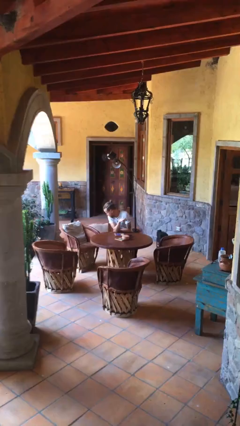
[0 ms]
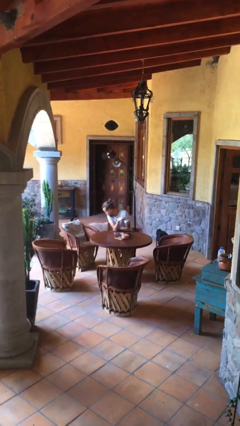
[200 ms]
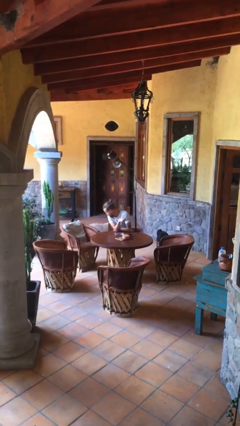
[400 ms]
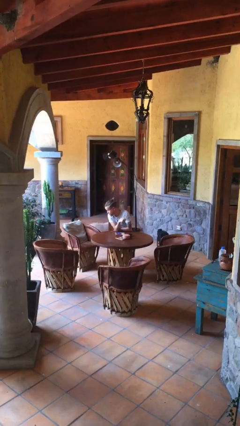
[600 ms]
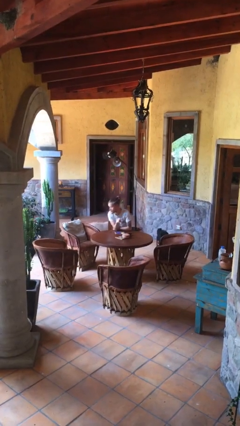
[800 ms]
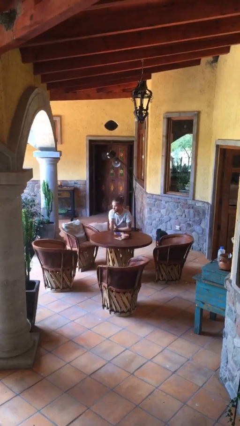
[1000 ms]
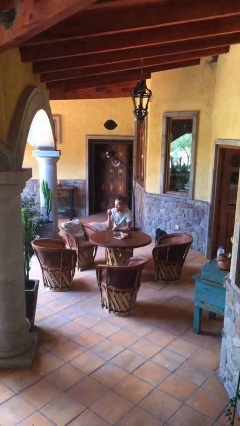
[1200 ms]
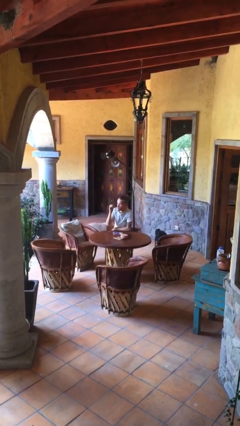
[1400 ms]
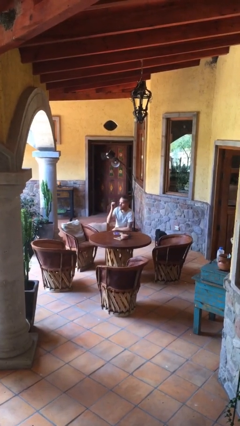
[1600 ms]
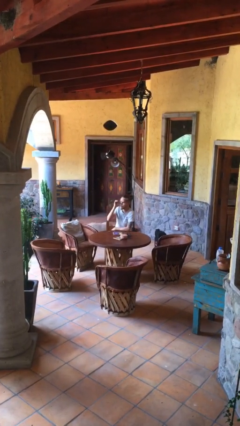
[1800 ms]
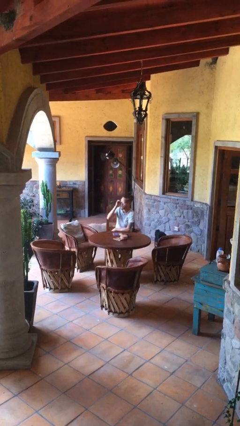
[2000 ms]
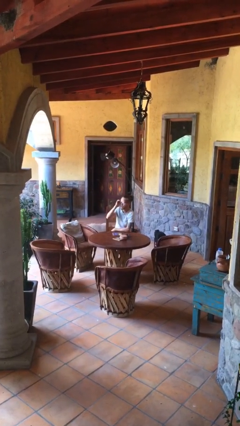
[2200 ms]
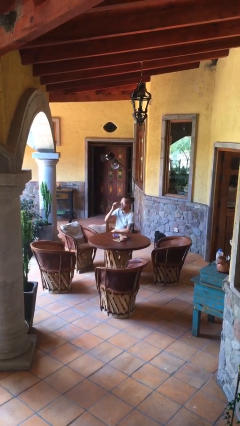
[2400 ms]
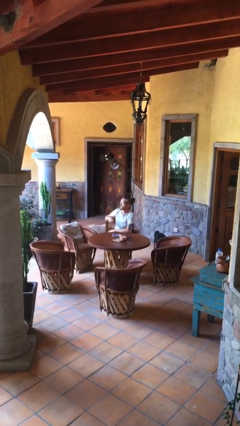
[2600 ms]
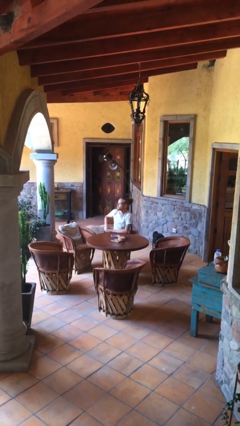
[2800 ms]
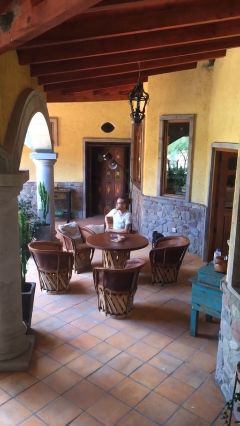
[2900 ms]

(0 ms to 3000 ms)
person puts on glasses

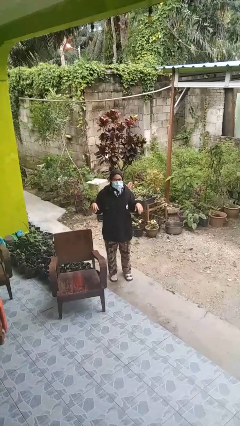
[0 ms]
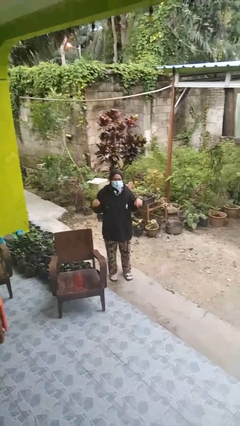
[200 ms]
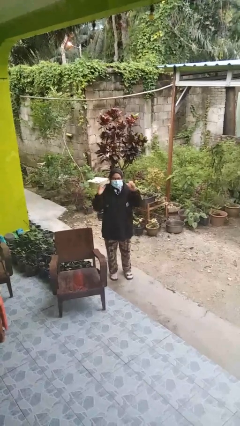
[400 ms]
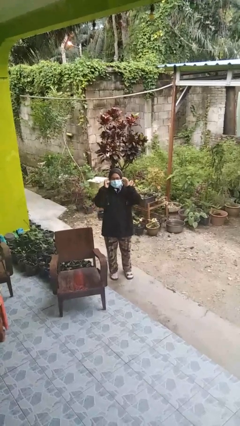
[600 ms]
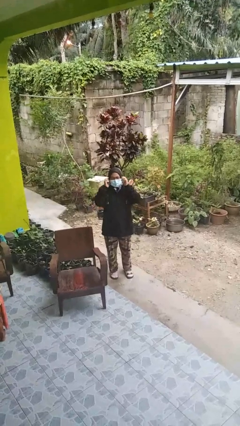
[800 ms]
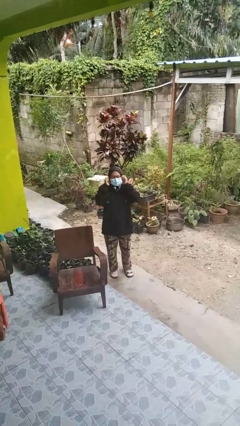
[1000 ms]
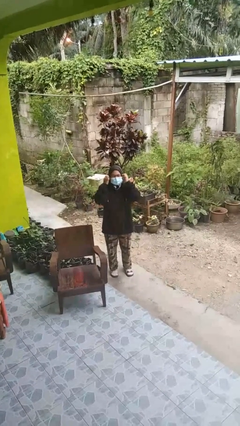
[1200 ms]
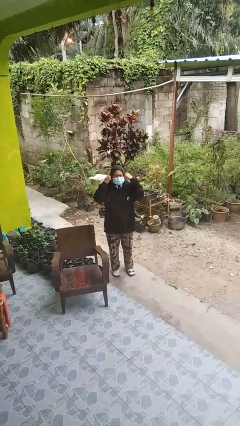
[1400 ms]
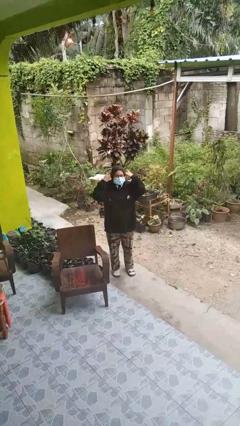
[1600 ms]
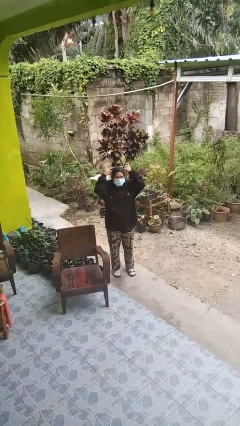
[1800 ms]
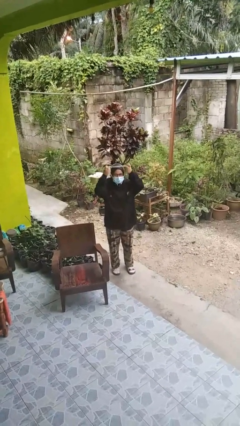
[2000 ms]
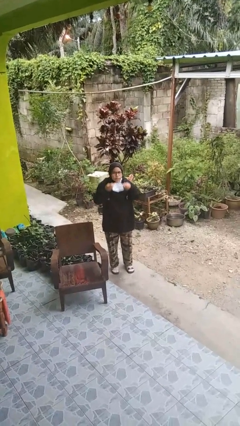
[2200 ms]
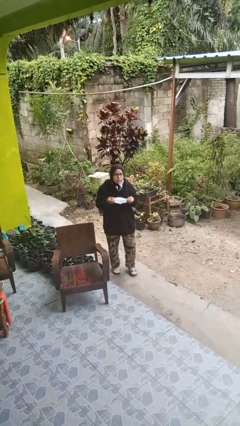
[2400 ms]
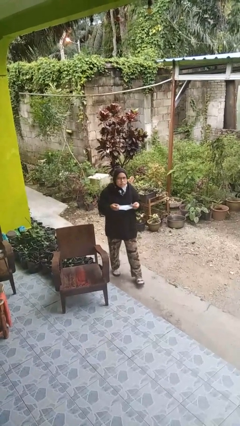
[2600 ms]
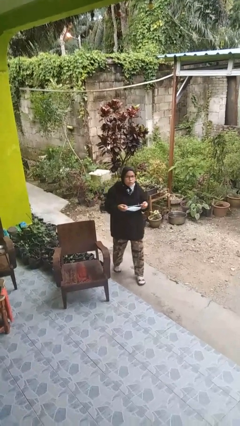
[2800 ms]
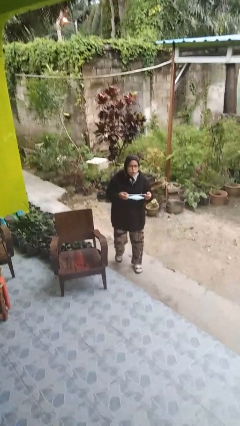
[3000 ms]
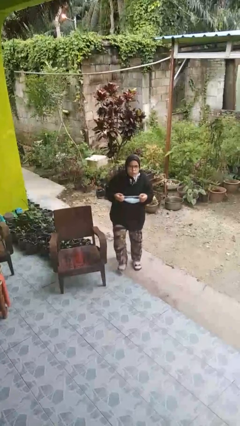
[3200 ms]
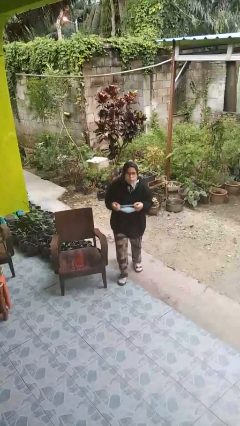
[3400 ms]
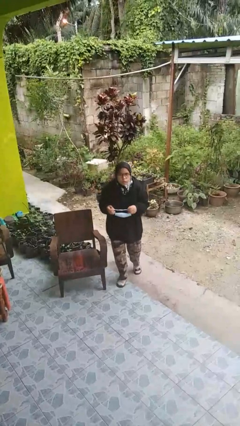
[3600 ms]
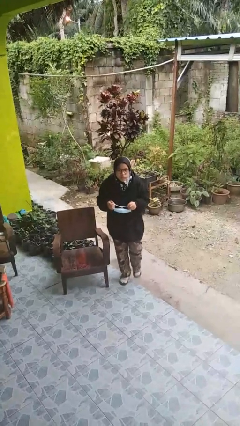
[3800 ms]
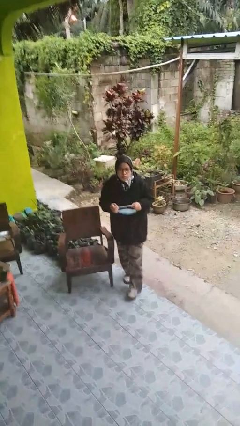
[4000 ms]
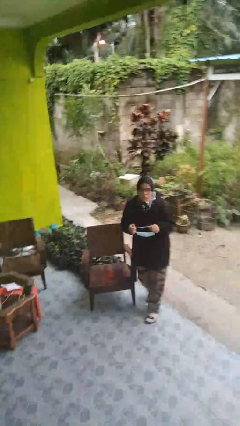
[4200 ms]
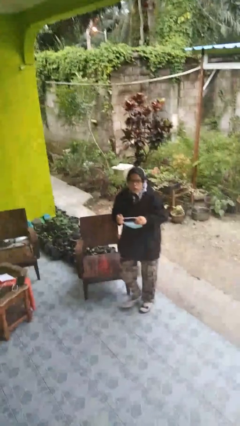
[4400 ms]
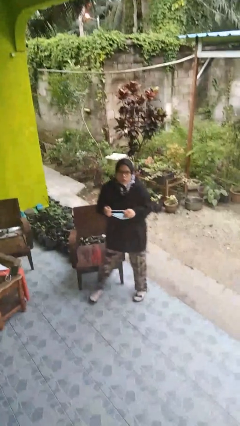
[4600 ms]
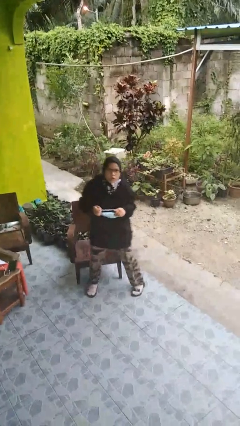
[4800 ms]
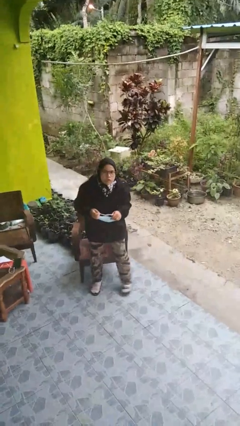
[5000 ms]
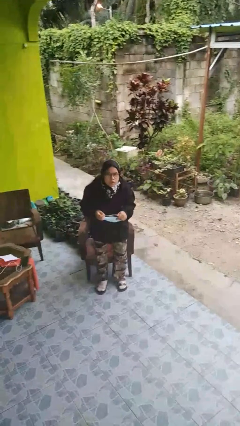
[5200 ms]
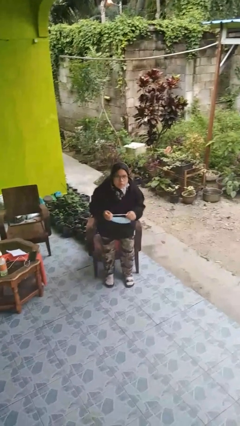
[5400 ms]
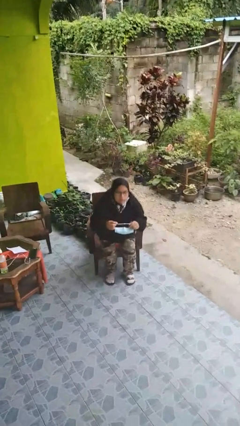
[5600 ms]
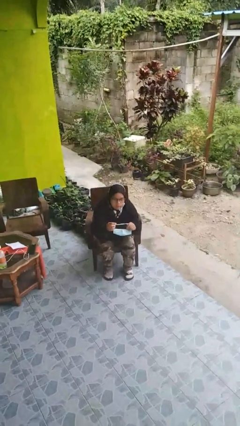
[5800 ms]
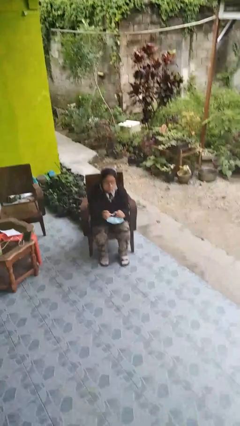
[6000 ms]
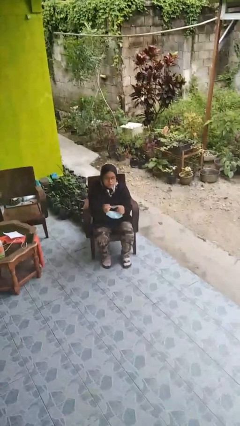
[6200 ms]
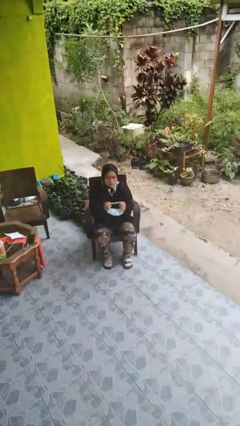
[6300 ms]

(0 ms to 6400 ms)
person takes off facemask

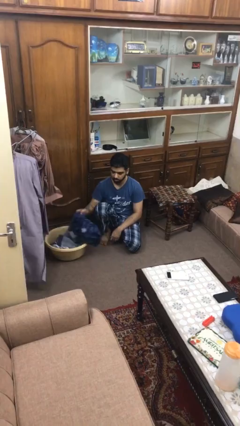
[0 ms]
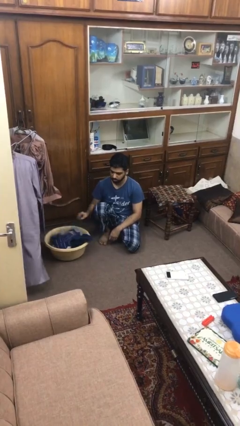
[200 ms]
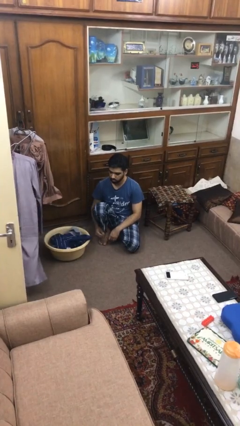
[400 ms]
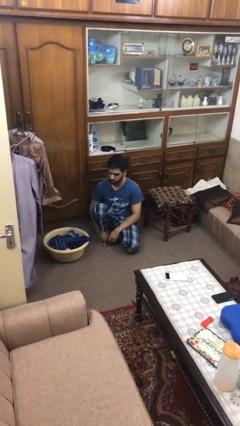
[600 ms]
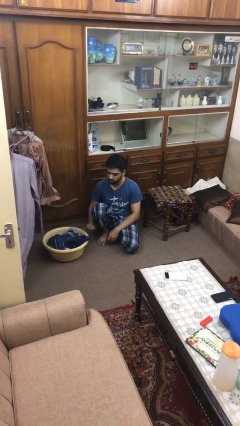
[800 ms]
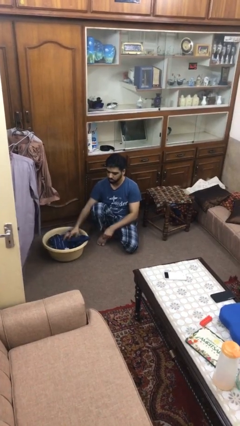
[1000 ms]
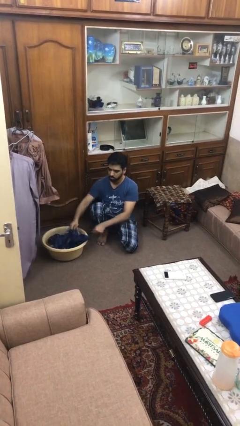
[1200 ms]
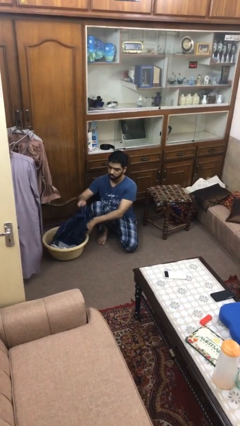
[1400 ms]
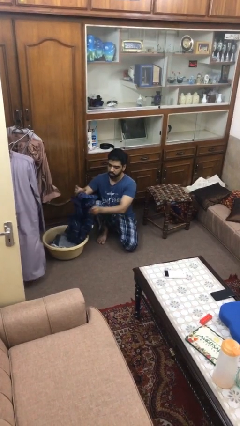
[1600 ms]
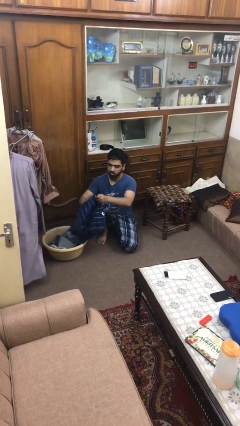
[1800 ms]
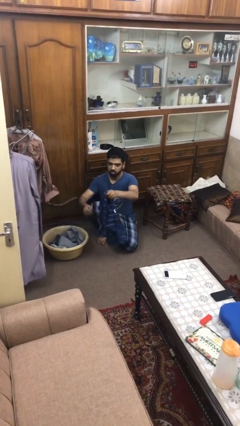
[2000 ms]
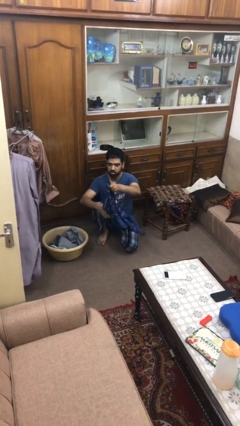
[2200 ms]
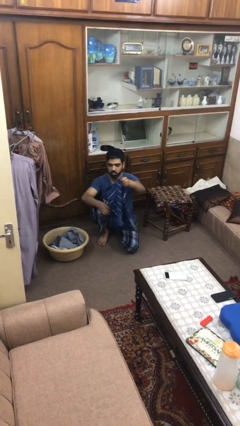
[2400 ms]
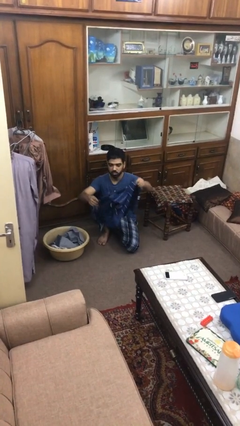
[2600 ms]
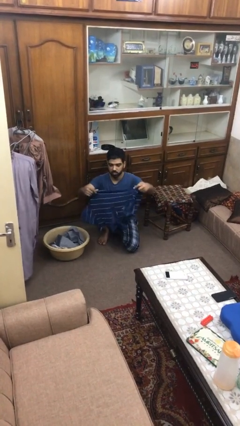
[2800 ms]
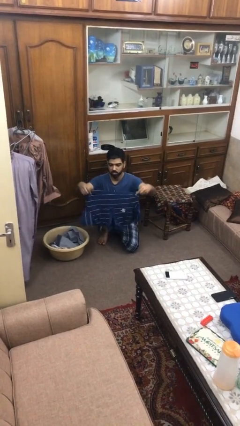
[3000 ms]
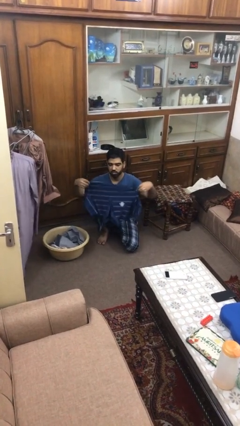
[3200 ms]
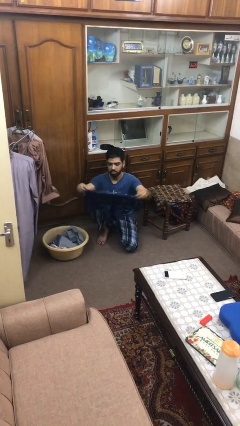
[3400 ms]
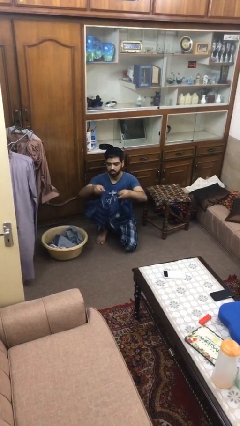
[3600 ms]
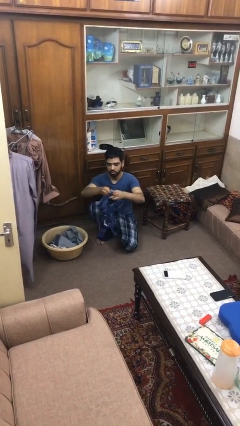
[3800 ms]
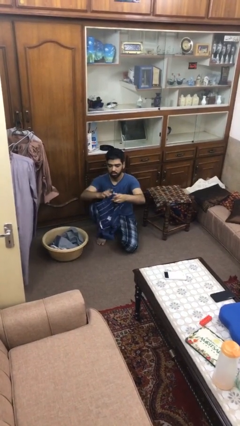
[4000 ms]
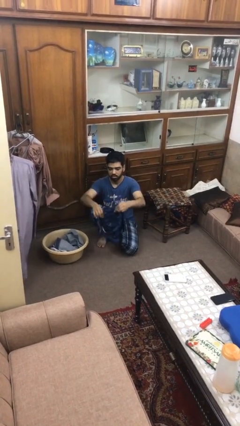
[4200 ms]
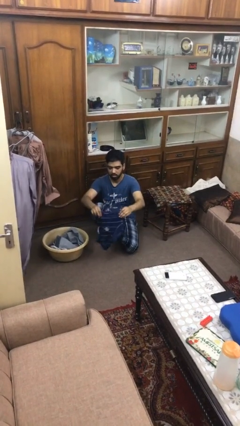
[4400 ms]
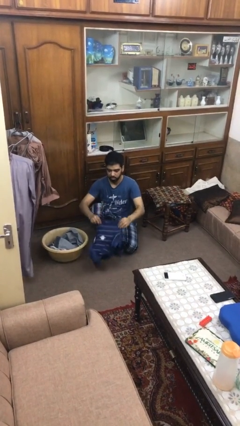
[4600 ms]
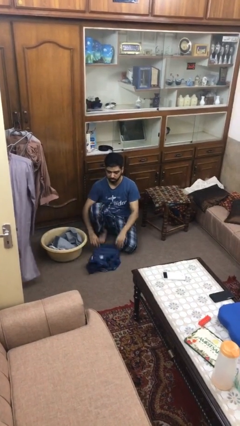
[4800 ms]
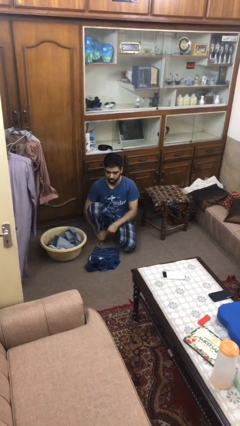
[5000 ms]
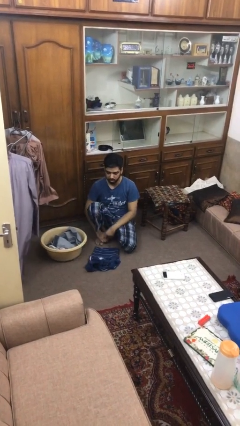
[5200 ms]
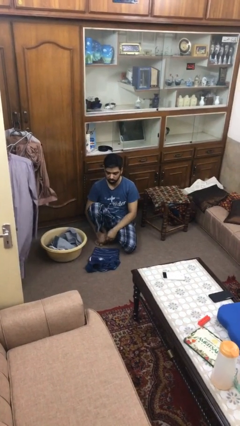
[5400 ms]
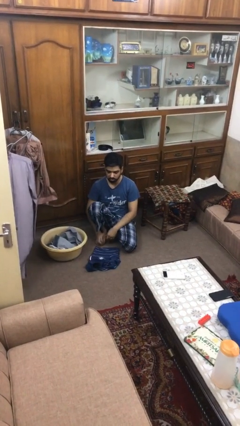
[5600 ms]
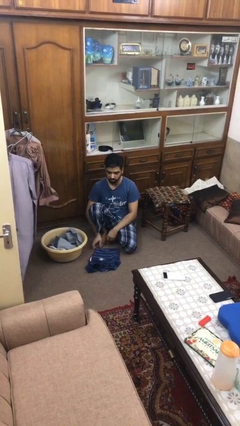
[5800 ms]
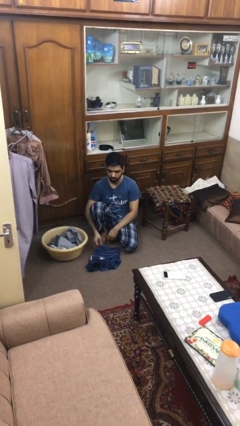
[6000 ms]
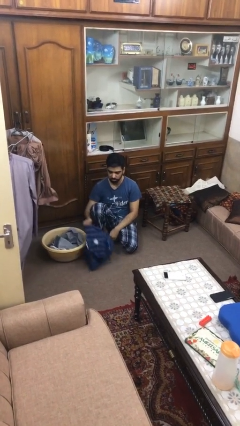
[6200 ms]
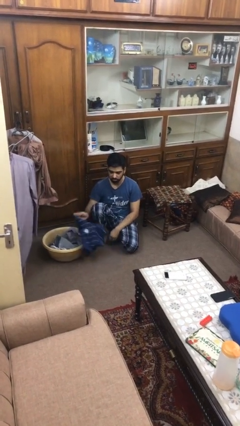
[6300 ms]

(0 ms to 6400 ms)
person folds shirt

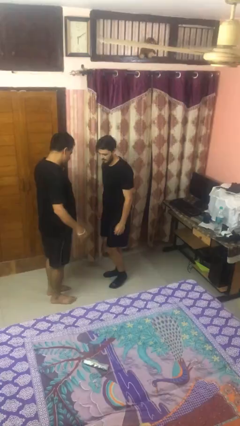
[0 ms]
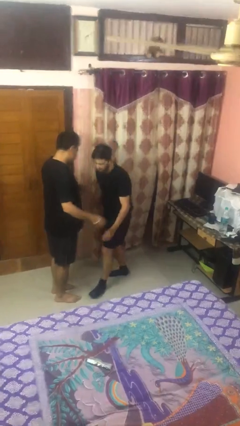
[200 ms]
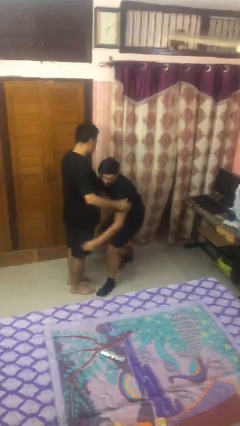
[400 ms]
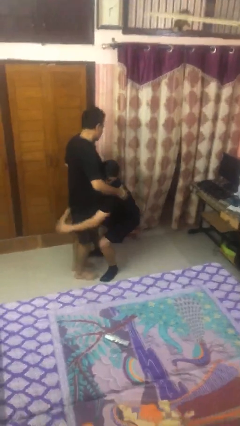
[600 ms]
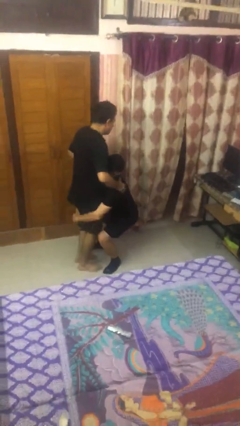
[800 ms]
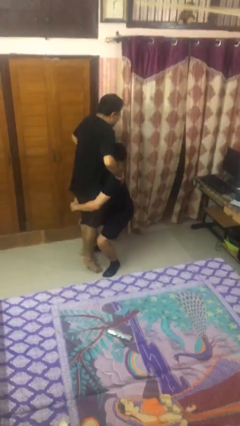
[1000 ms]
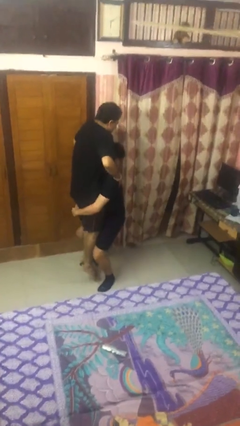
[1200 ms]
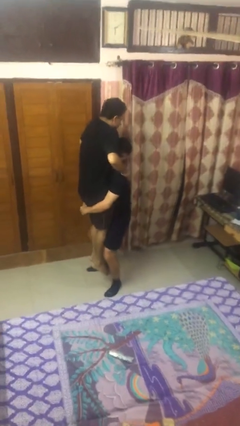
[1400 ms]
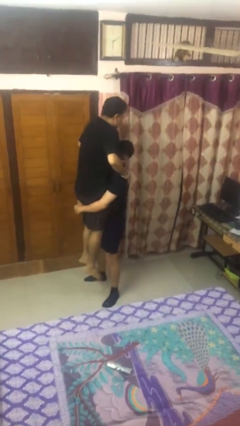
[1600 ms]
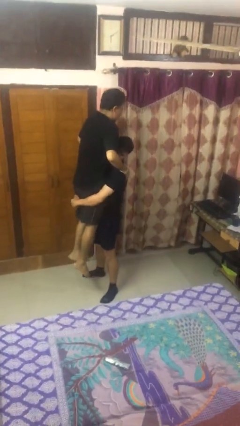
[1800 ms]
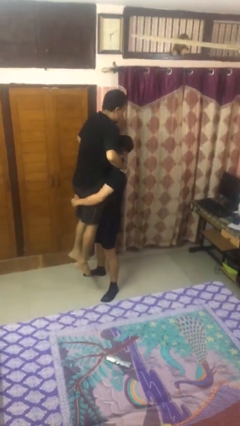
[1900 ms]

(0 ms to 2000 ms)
person picks up person

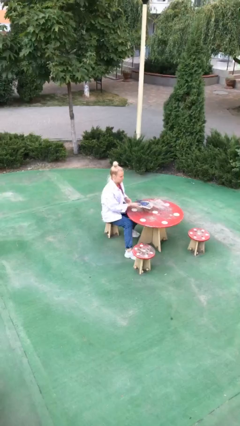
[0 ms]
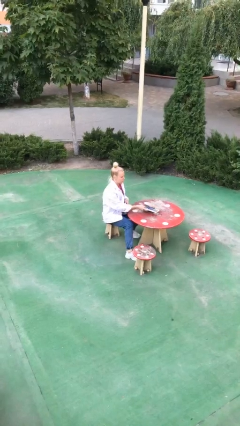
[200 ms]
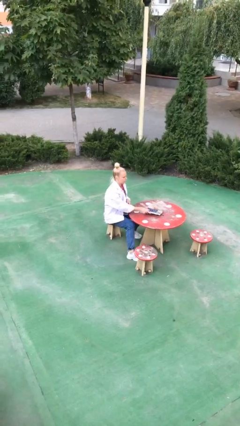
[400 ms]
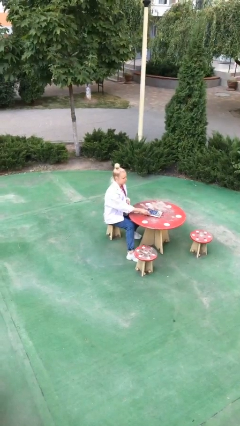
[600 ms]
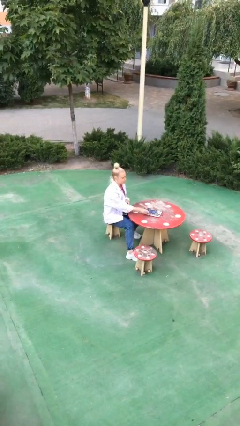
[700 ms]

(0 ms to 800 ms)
person puts down object on table
